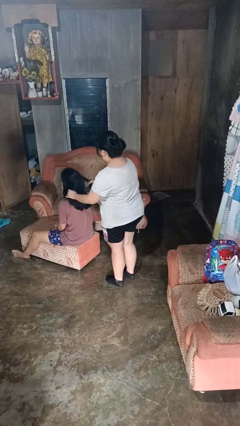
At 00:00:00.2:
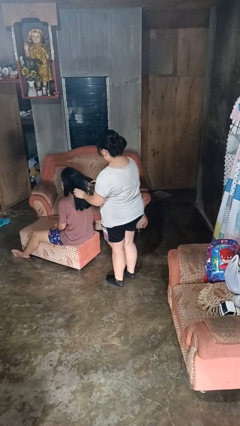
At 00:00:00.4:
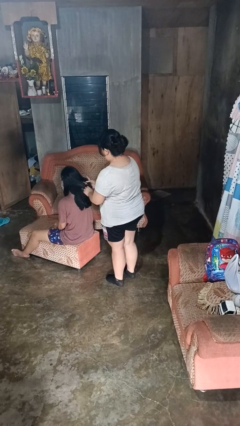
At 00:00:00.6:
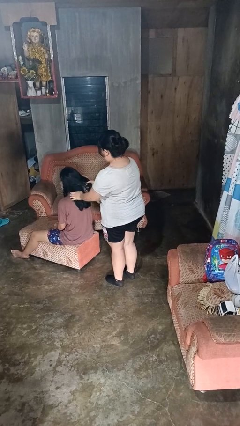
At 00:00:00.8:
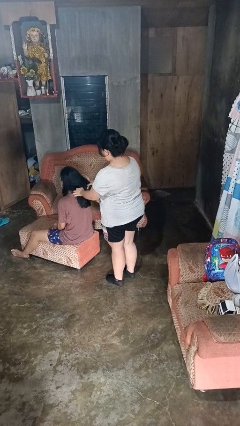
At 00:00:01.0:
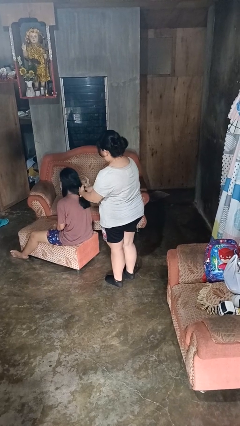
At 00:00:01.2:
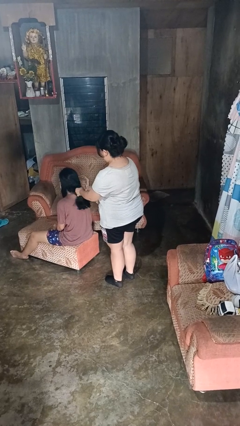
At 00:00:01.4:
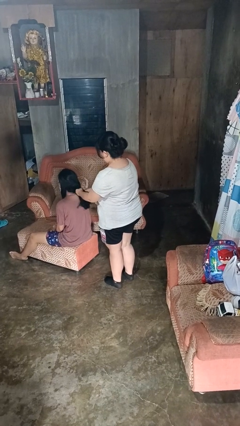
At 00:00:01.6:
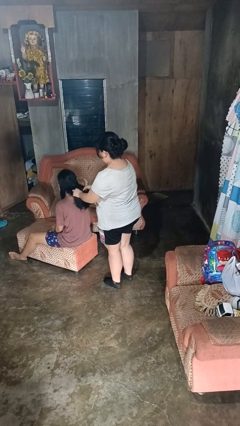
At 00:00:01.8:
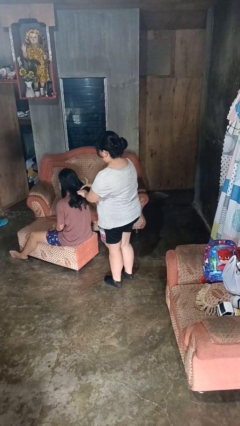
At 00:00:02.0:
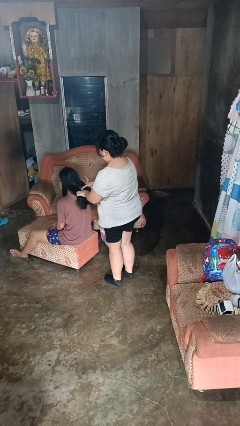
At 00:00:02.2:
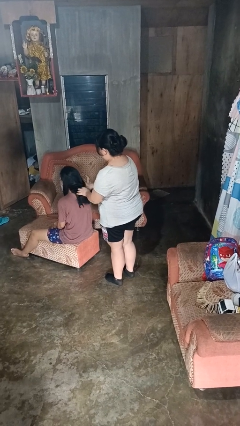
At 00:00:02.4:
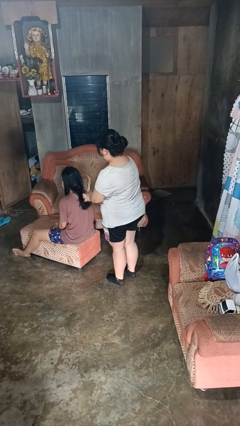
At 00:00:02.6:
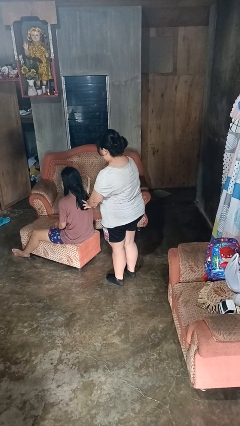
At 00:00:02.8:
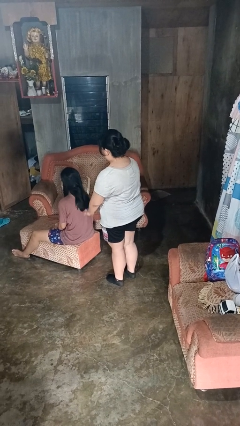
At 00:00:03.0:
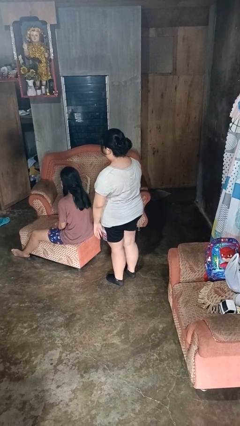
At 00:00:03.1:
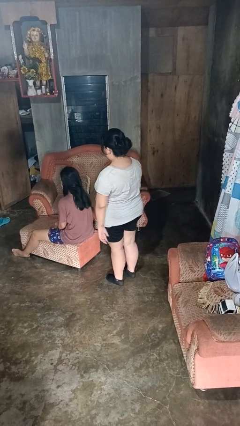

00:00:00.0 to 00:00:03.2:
person braids hair of person

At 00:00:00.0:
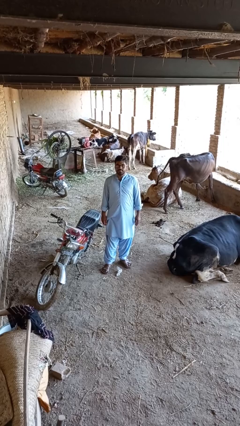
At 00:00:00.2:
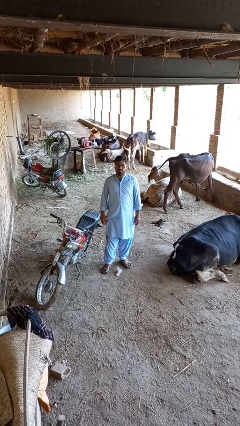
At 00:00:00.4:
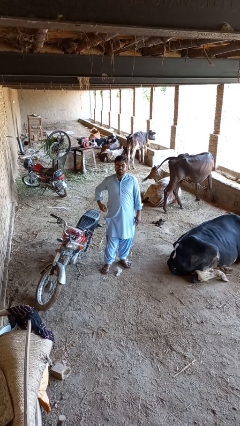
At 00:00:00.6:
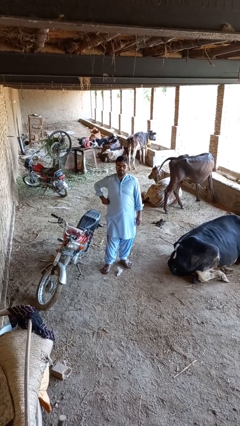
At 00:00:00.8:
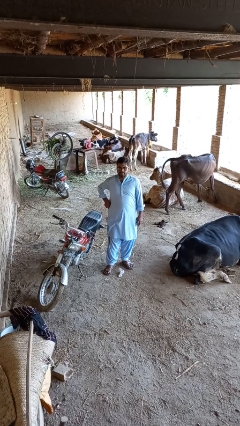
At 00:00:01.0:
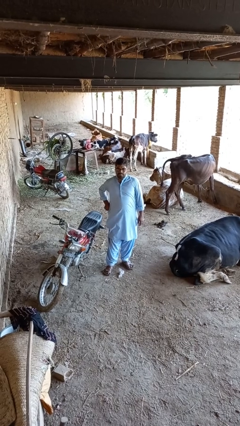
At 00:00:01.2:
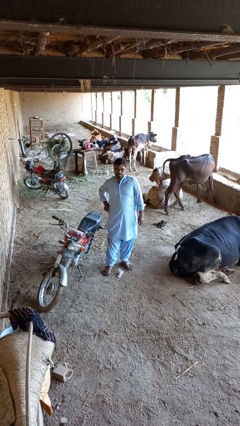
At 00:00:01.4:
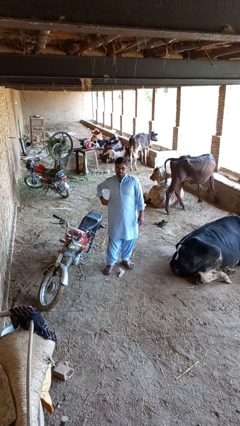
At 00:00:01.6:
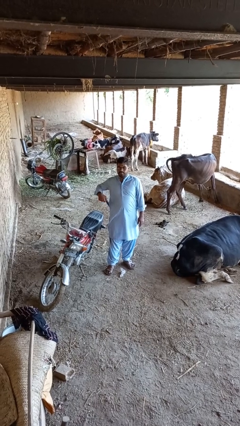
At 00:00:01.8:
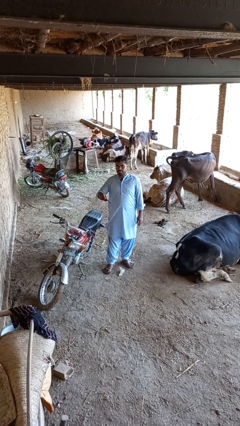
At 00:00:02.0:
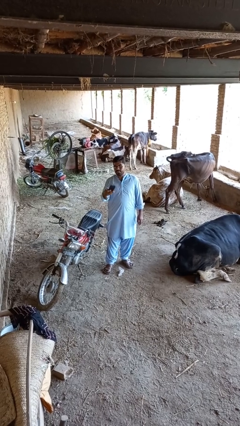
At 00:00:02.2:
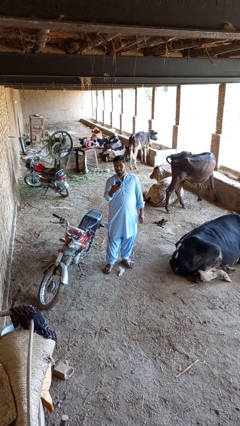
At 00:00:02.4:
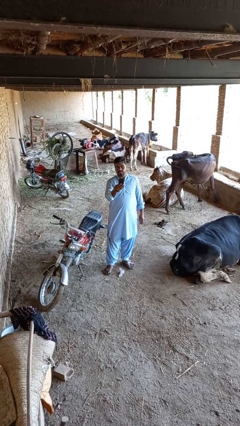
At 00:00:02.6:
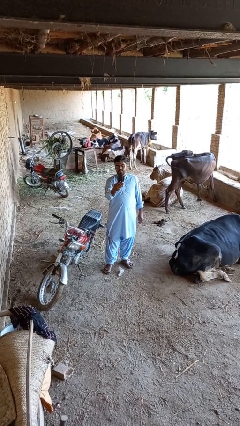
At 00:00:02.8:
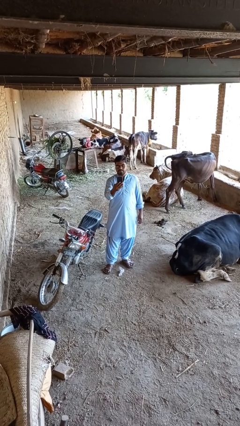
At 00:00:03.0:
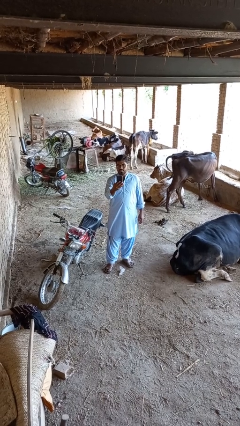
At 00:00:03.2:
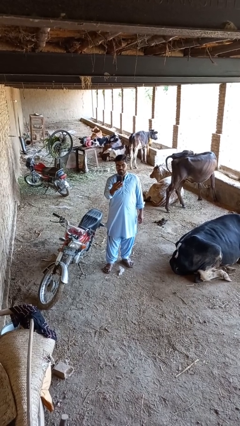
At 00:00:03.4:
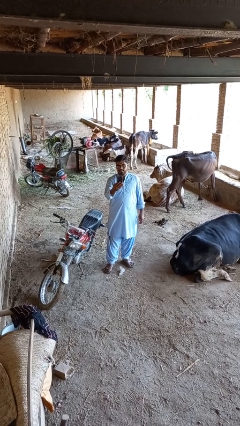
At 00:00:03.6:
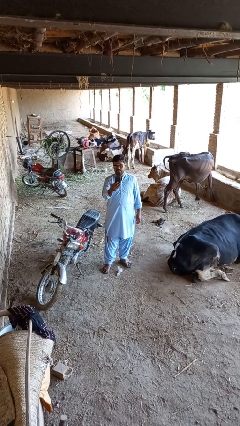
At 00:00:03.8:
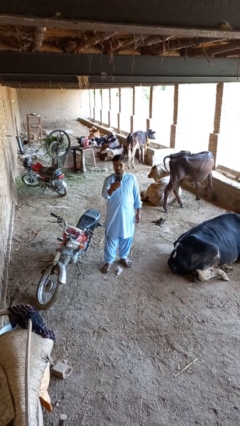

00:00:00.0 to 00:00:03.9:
person takes phone from pocket

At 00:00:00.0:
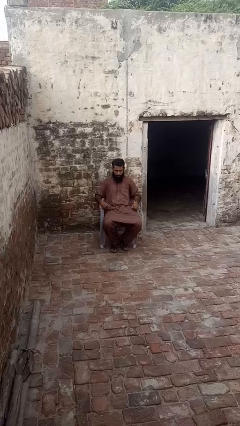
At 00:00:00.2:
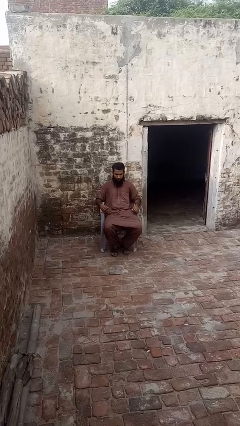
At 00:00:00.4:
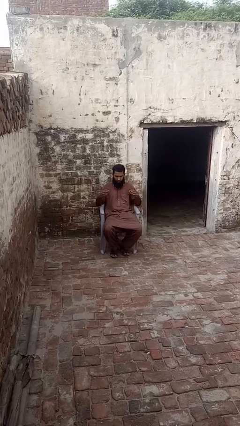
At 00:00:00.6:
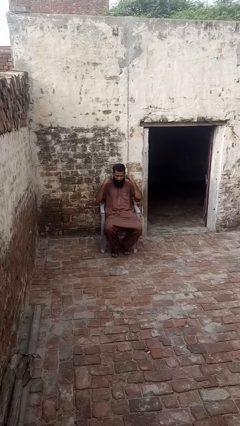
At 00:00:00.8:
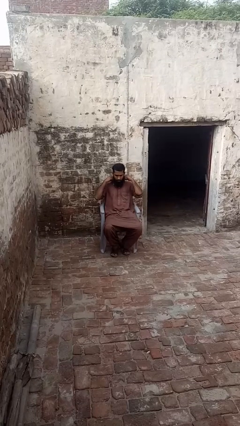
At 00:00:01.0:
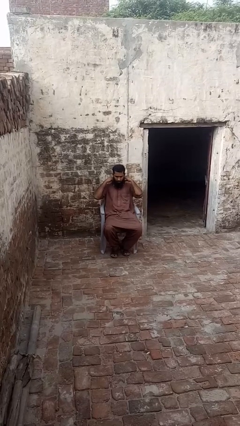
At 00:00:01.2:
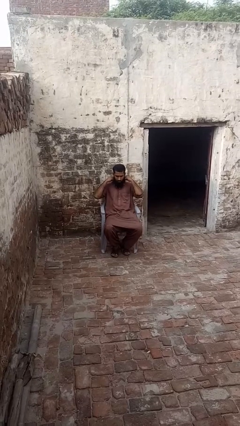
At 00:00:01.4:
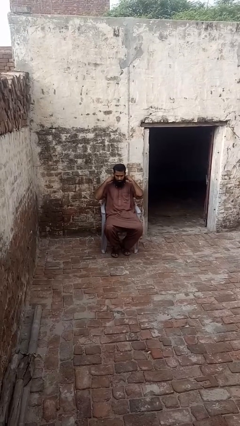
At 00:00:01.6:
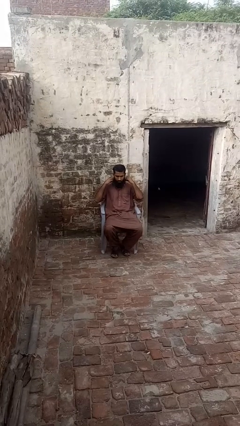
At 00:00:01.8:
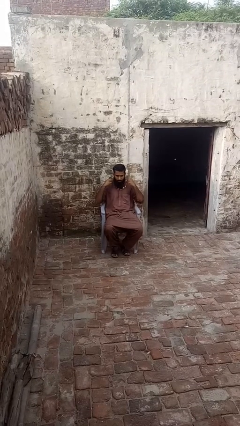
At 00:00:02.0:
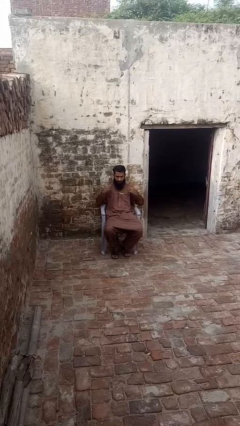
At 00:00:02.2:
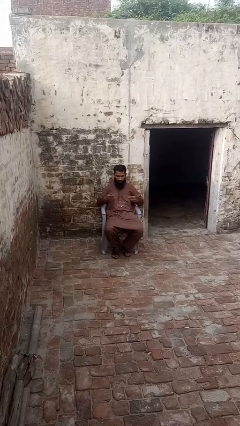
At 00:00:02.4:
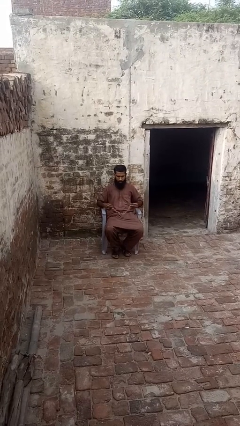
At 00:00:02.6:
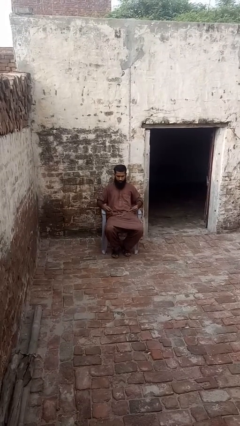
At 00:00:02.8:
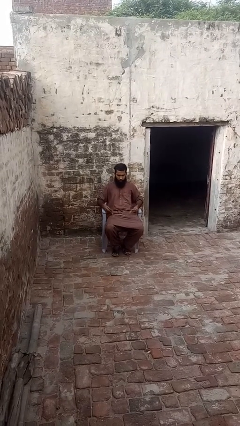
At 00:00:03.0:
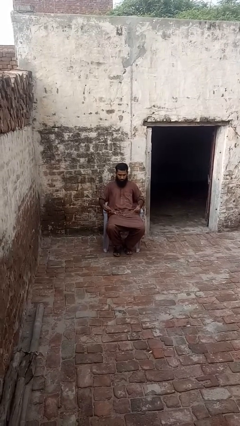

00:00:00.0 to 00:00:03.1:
person takes off necklace

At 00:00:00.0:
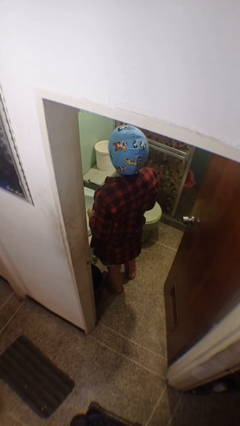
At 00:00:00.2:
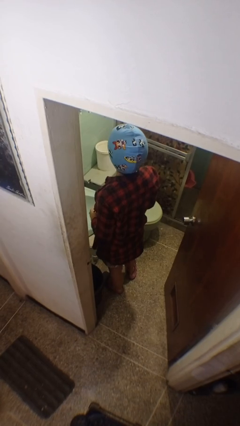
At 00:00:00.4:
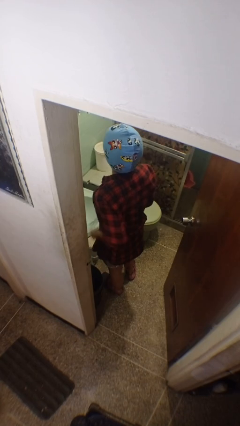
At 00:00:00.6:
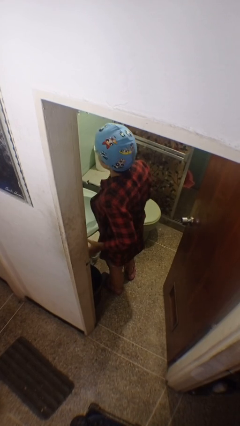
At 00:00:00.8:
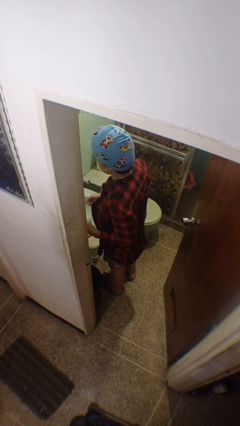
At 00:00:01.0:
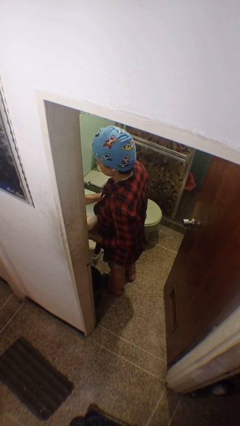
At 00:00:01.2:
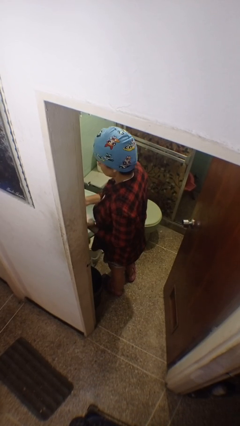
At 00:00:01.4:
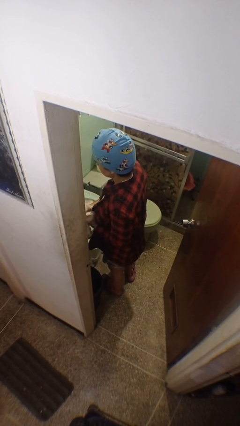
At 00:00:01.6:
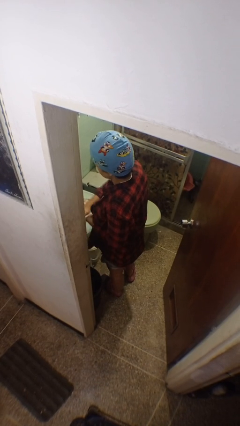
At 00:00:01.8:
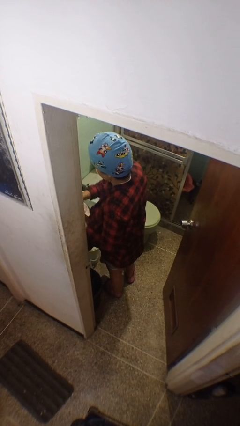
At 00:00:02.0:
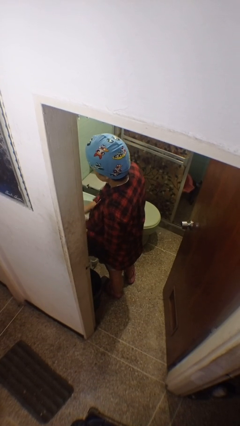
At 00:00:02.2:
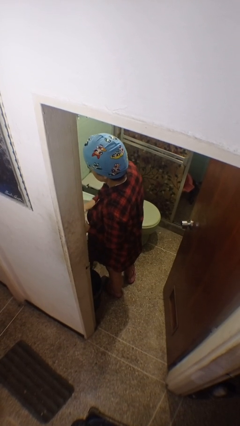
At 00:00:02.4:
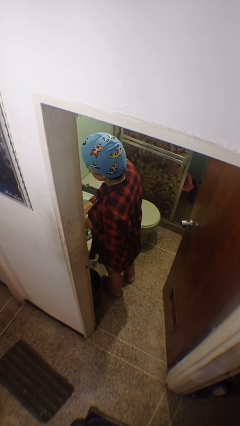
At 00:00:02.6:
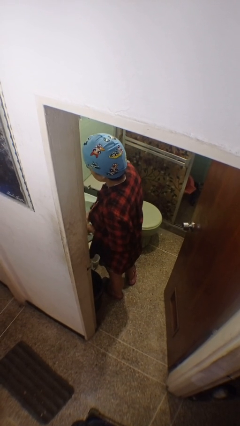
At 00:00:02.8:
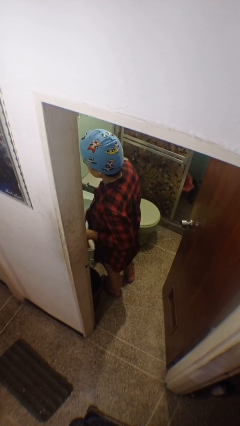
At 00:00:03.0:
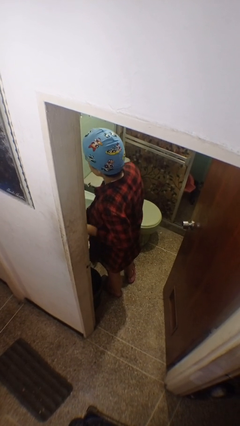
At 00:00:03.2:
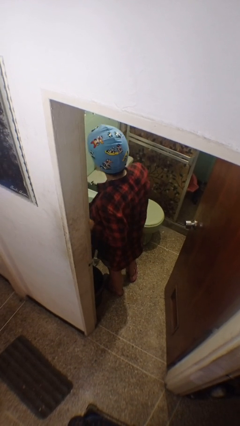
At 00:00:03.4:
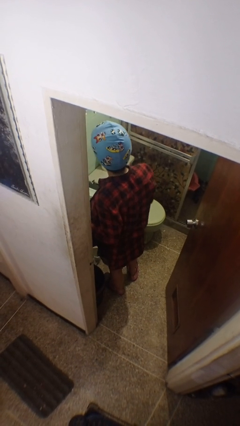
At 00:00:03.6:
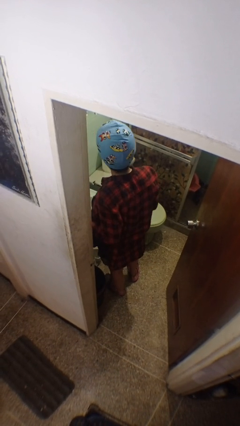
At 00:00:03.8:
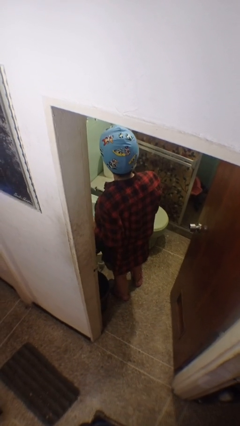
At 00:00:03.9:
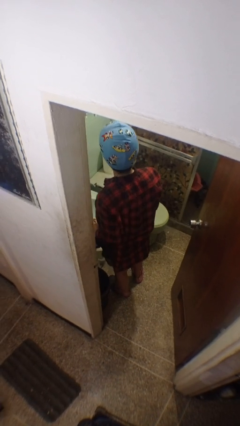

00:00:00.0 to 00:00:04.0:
person dries hands with towel

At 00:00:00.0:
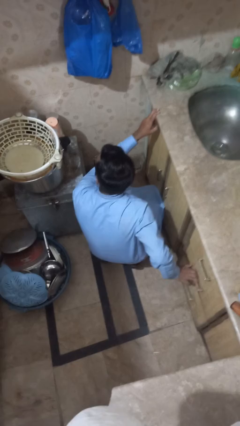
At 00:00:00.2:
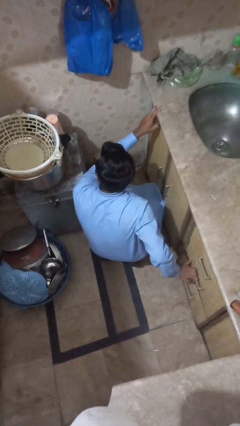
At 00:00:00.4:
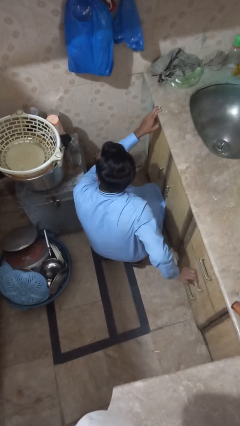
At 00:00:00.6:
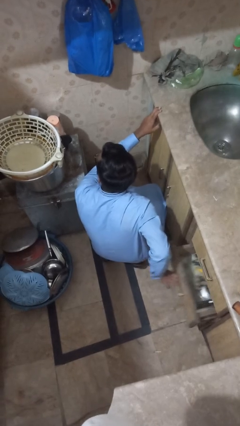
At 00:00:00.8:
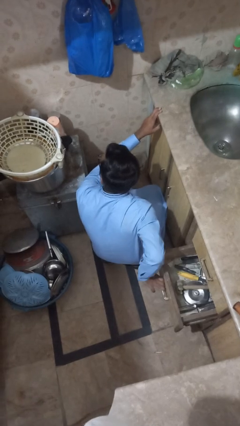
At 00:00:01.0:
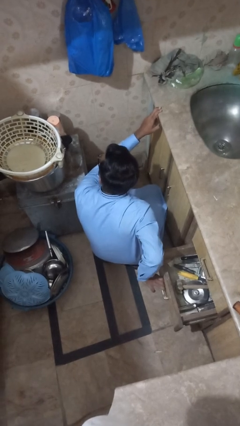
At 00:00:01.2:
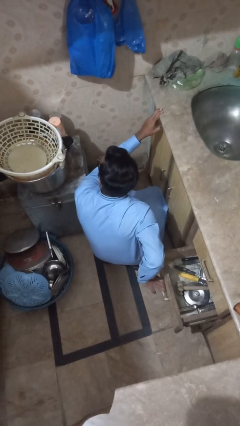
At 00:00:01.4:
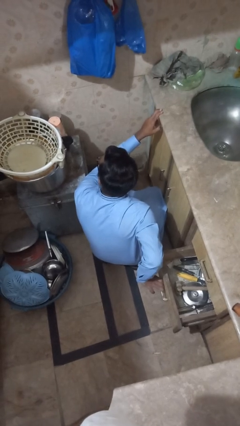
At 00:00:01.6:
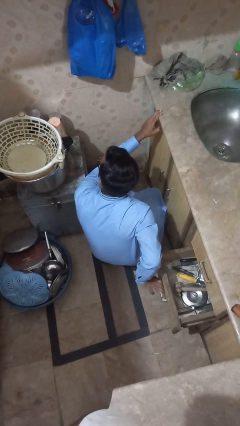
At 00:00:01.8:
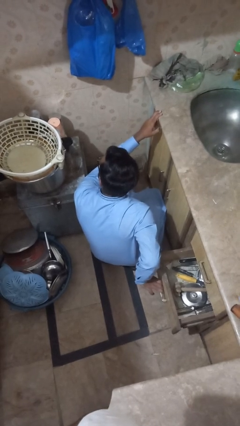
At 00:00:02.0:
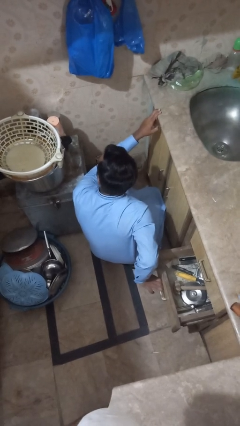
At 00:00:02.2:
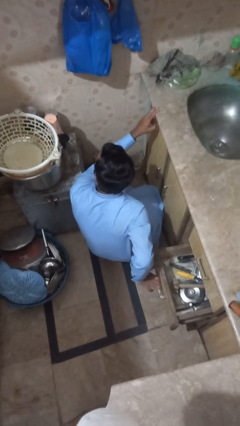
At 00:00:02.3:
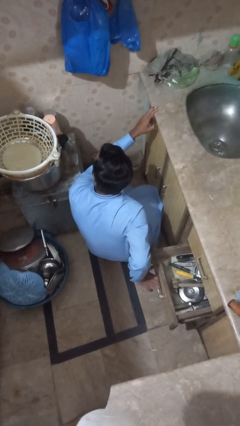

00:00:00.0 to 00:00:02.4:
person opens kitchen drawer

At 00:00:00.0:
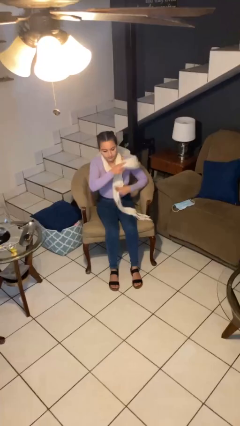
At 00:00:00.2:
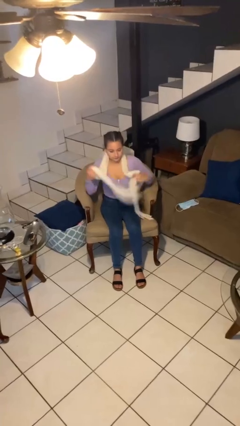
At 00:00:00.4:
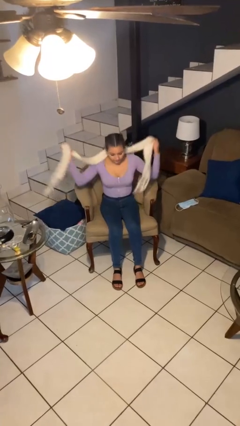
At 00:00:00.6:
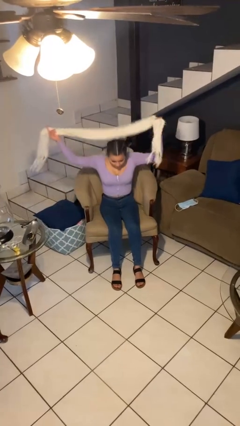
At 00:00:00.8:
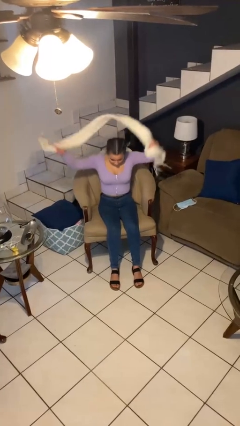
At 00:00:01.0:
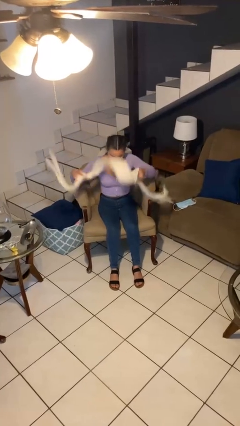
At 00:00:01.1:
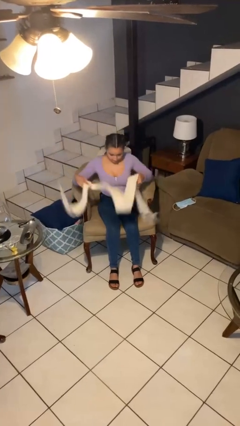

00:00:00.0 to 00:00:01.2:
person takes off scarf
